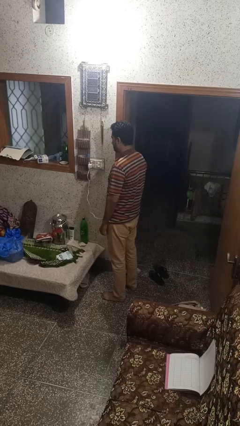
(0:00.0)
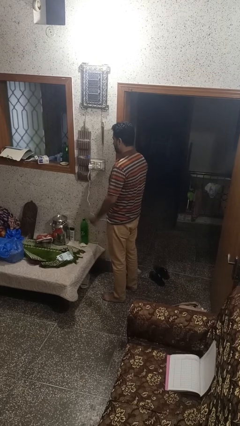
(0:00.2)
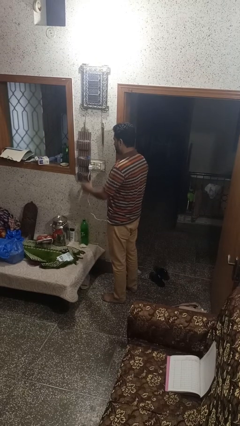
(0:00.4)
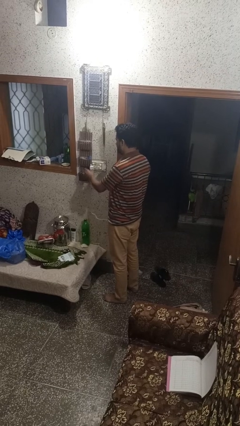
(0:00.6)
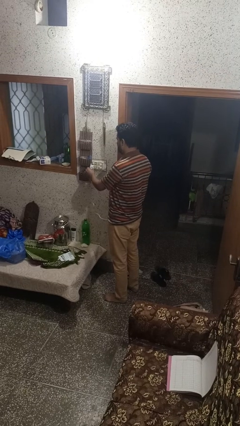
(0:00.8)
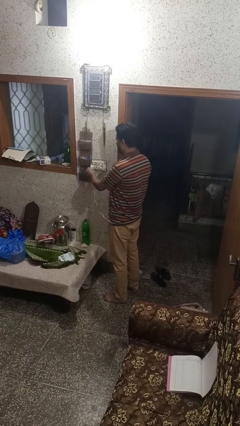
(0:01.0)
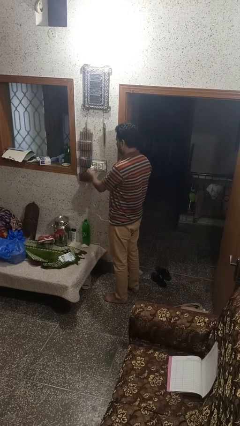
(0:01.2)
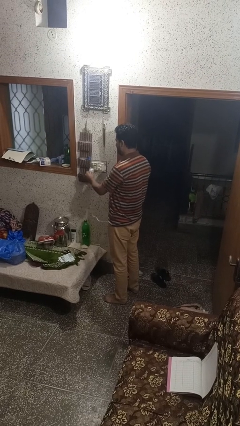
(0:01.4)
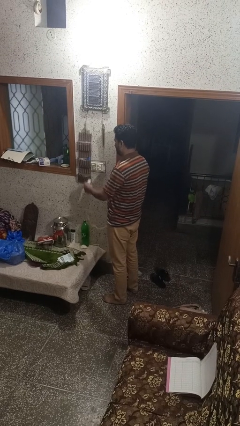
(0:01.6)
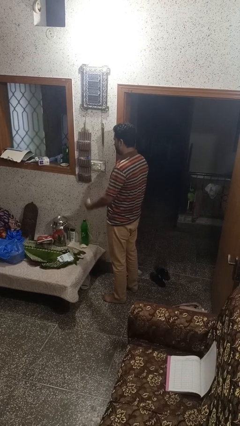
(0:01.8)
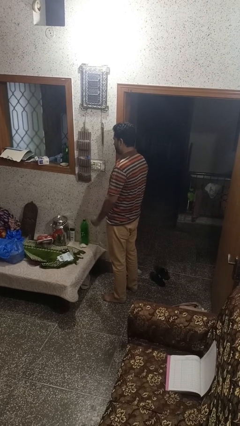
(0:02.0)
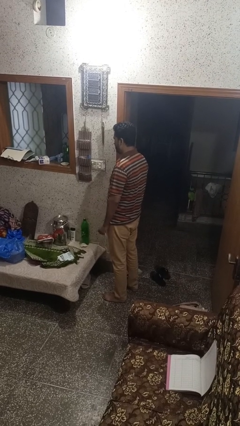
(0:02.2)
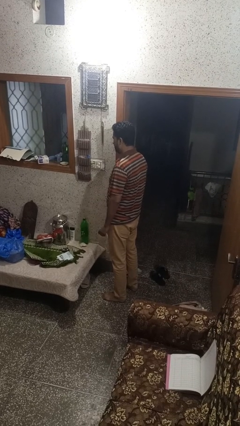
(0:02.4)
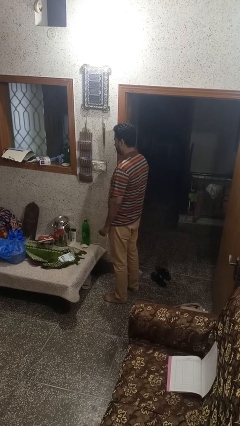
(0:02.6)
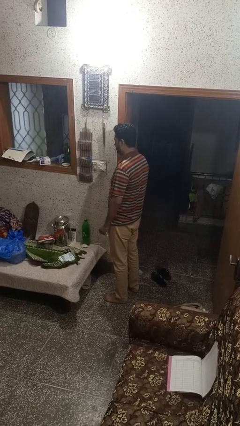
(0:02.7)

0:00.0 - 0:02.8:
person unplugs from electrical socket

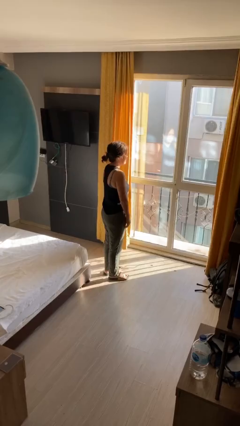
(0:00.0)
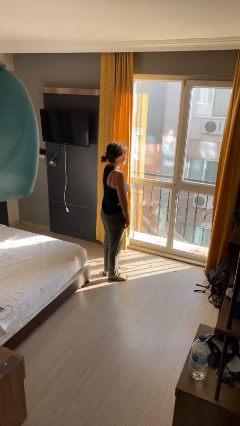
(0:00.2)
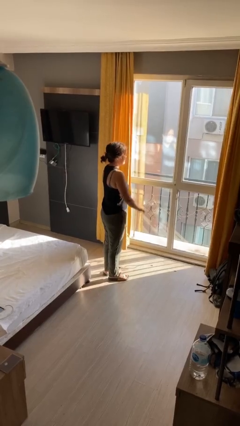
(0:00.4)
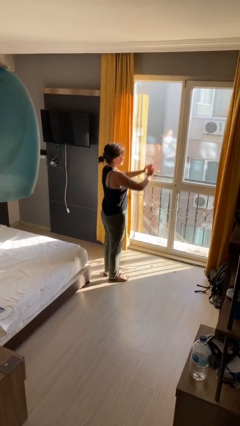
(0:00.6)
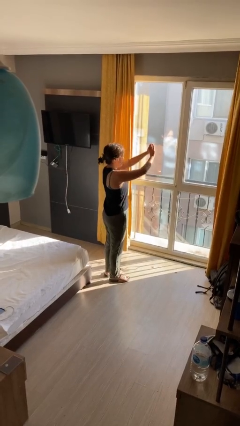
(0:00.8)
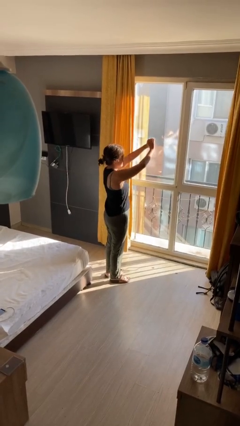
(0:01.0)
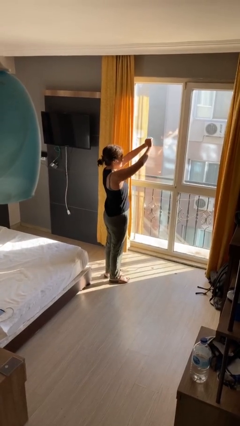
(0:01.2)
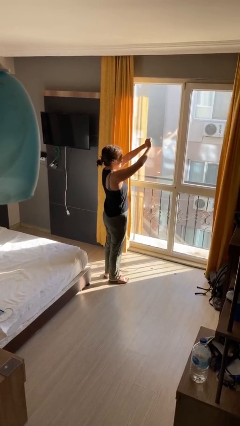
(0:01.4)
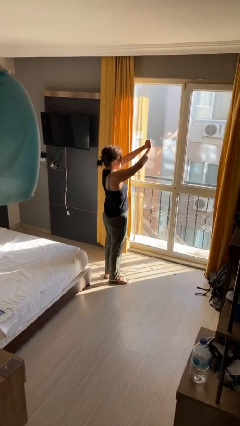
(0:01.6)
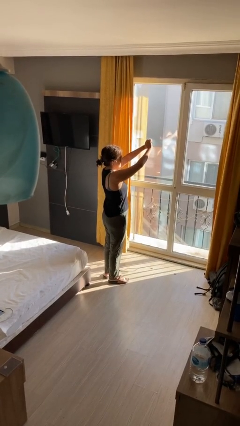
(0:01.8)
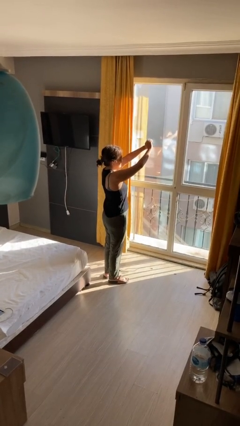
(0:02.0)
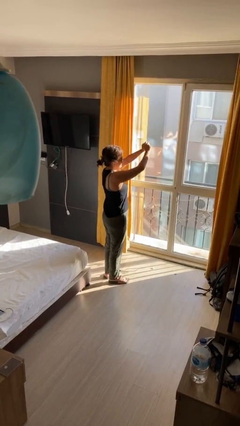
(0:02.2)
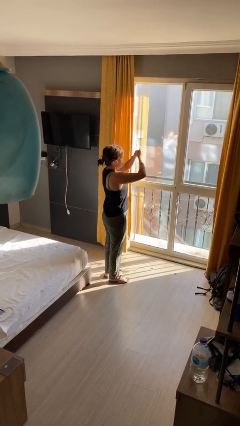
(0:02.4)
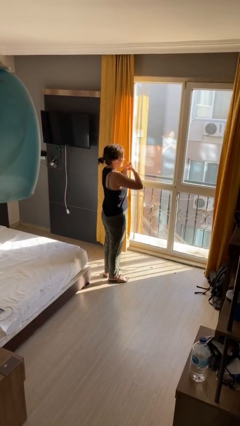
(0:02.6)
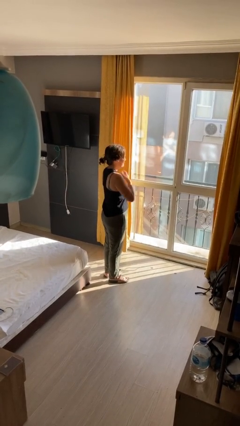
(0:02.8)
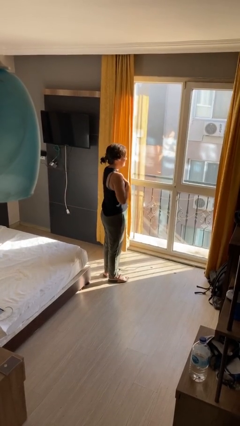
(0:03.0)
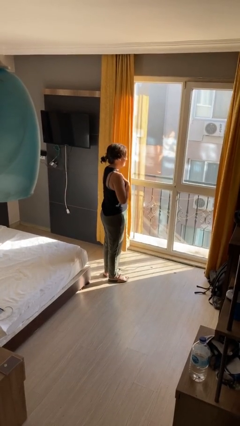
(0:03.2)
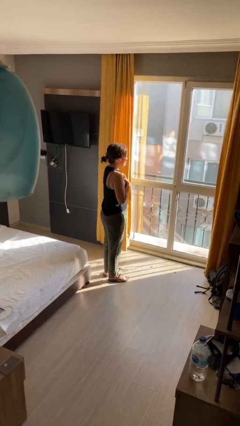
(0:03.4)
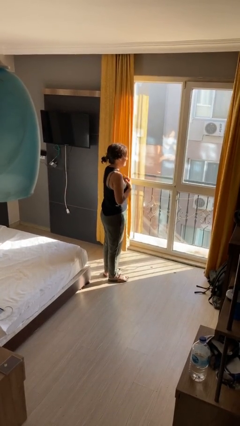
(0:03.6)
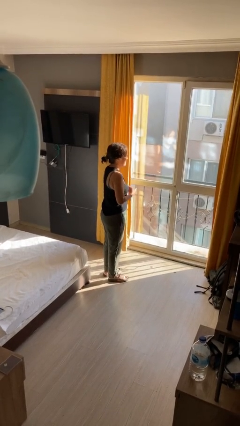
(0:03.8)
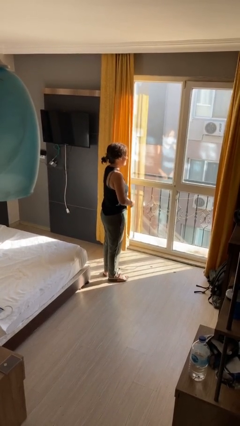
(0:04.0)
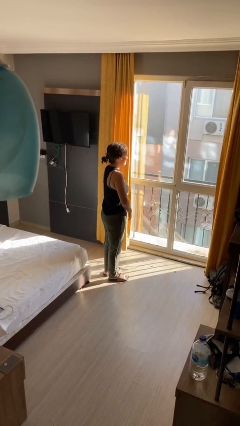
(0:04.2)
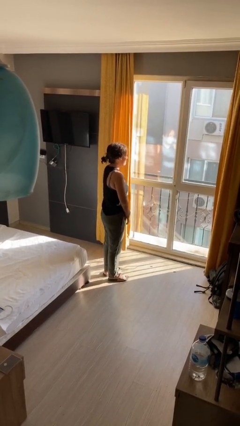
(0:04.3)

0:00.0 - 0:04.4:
person prays

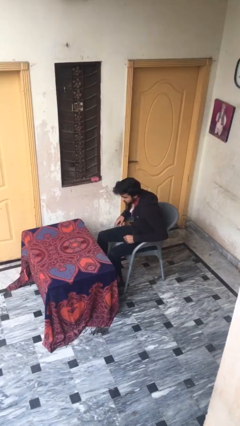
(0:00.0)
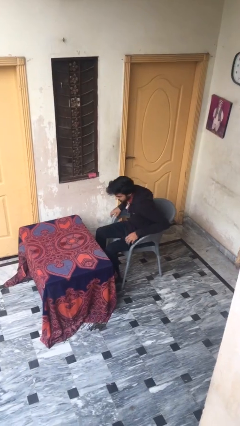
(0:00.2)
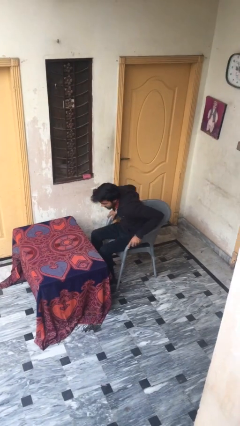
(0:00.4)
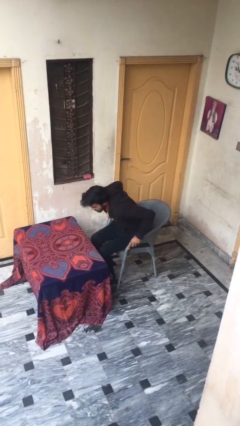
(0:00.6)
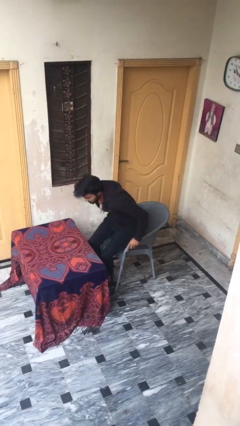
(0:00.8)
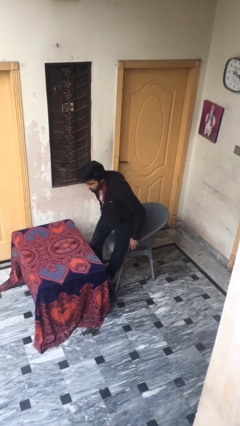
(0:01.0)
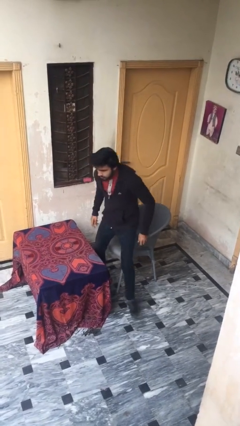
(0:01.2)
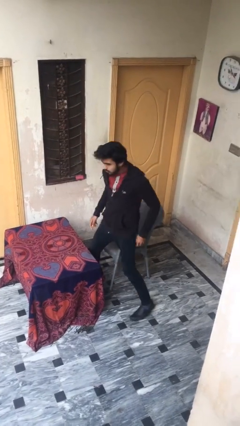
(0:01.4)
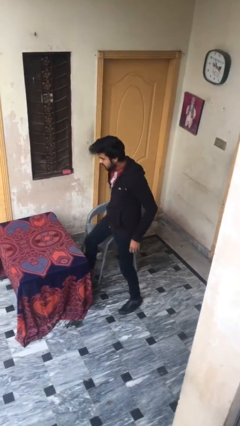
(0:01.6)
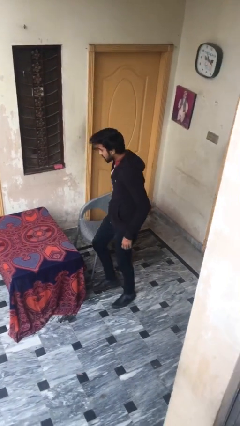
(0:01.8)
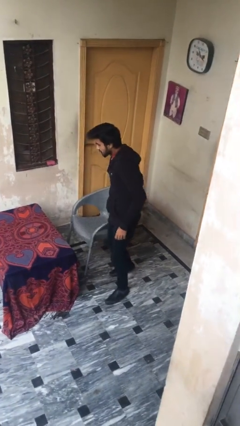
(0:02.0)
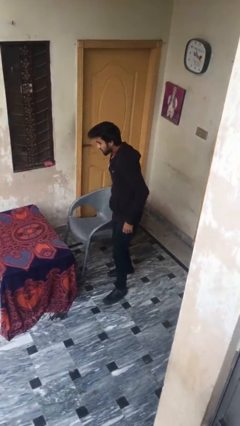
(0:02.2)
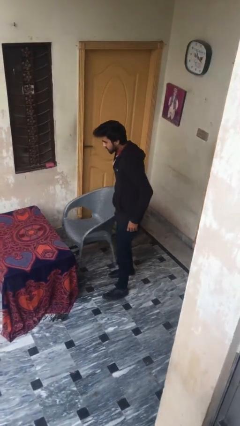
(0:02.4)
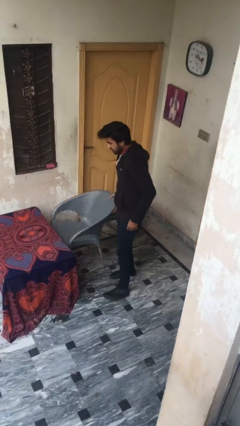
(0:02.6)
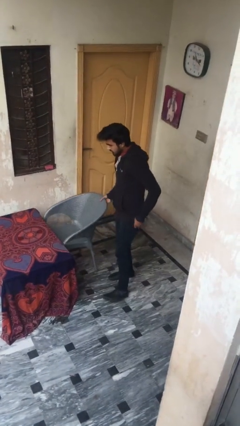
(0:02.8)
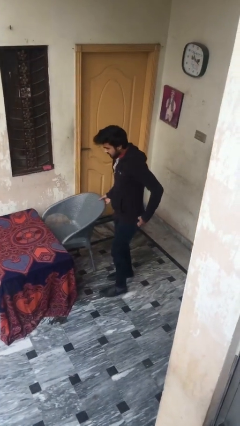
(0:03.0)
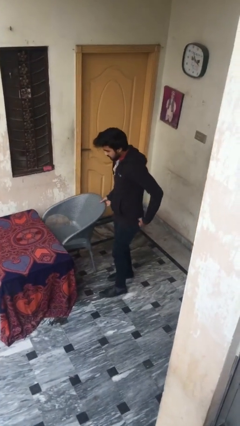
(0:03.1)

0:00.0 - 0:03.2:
person stands up

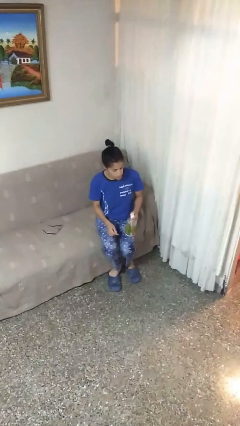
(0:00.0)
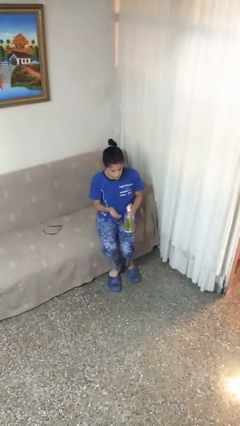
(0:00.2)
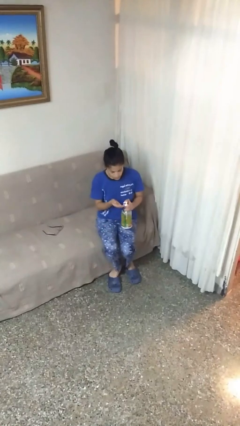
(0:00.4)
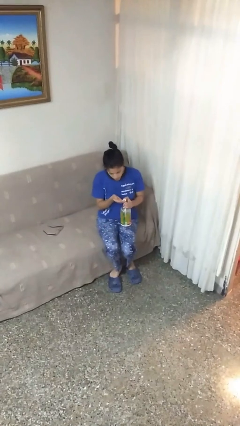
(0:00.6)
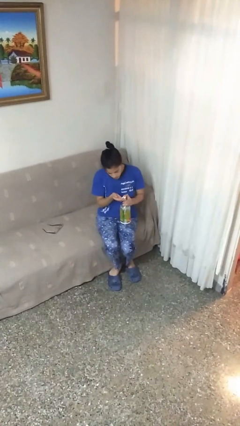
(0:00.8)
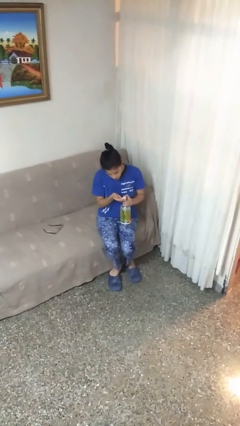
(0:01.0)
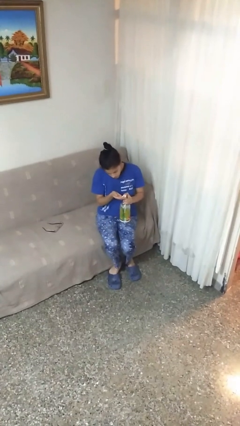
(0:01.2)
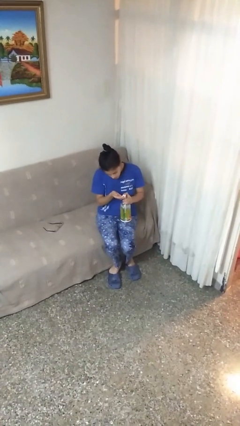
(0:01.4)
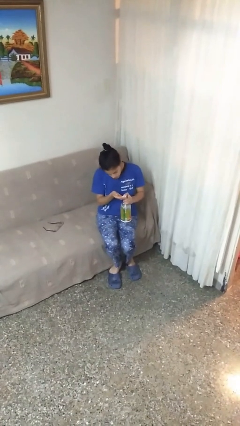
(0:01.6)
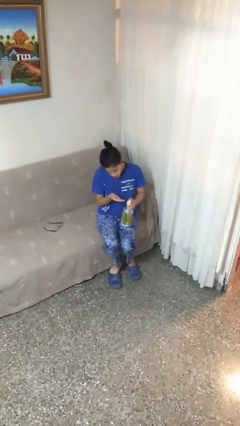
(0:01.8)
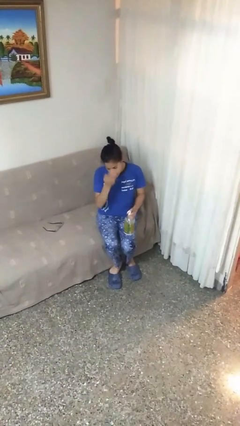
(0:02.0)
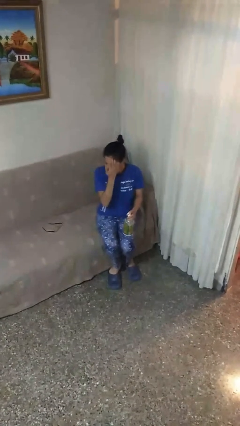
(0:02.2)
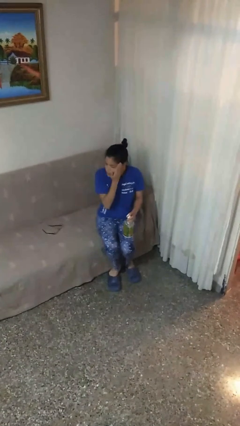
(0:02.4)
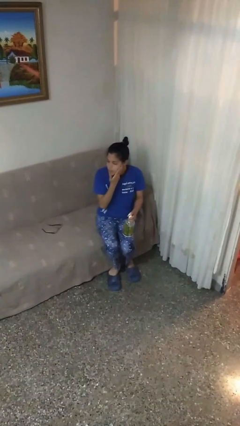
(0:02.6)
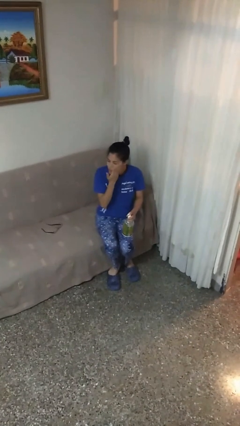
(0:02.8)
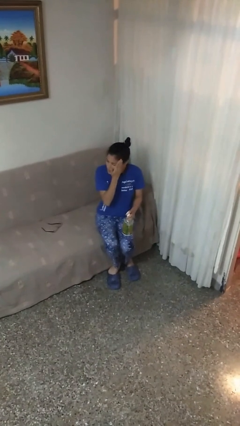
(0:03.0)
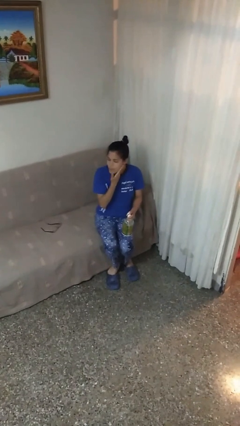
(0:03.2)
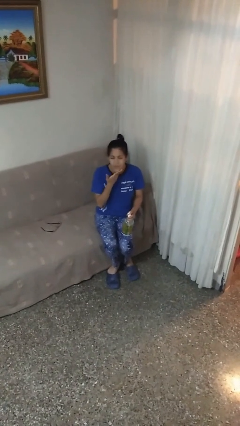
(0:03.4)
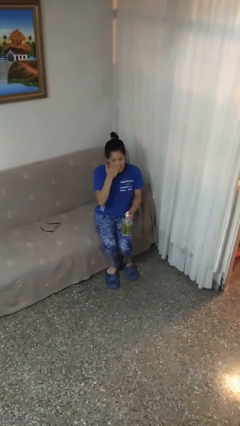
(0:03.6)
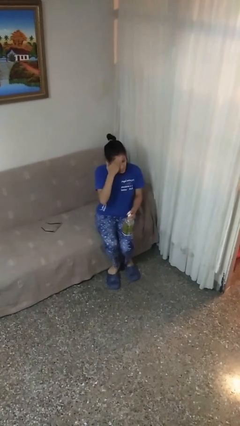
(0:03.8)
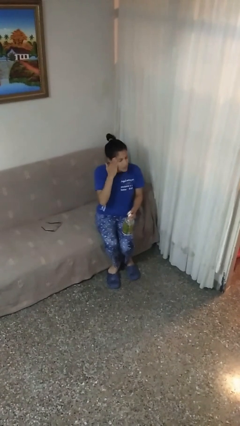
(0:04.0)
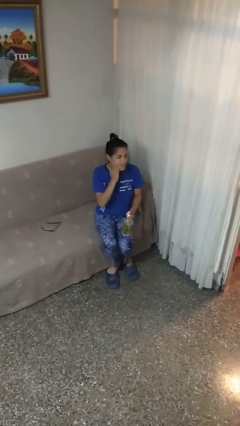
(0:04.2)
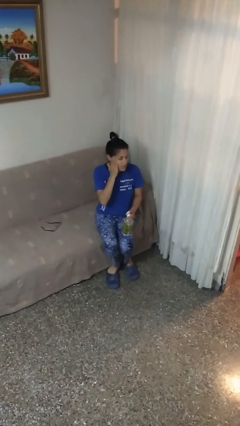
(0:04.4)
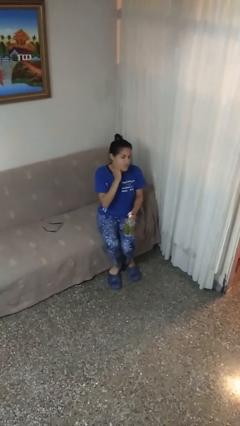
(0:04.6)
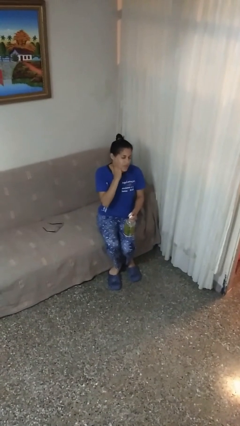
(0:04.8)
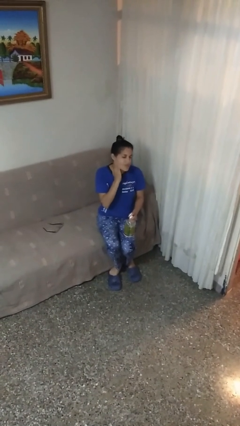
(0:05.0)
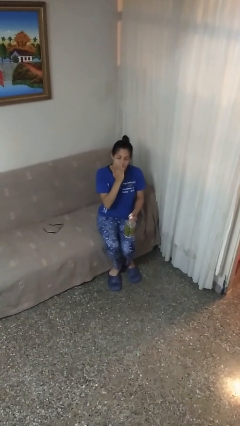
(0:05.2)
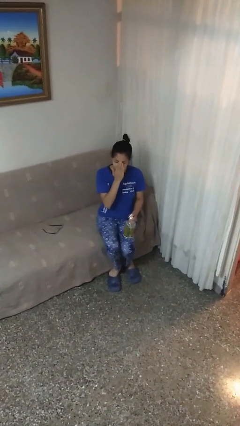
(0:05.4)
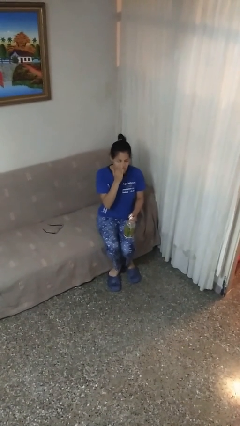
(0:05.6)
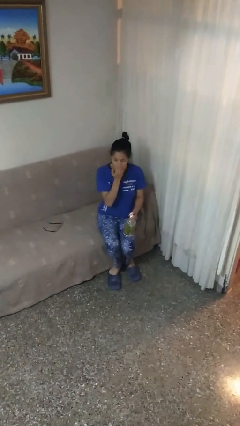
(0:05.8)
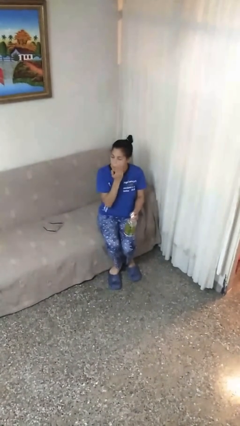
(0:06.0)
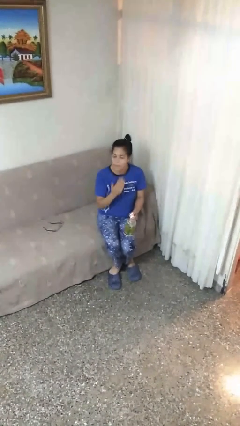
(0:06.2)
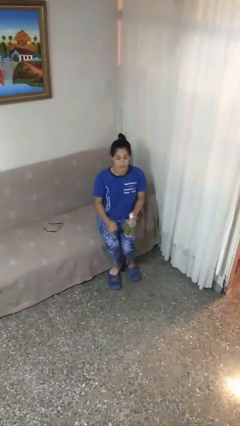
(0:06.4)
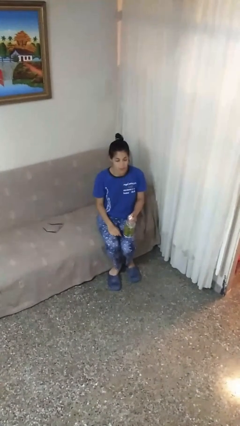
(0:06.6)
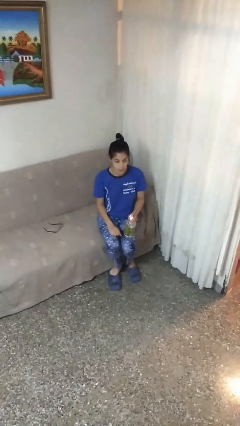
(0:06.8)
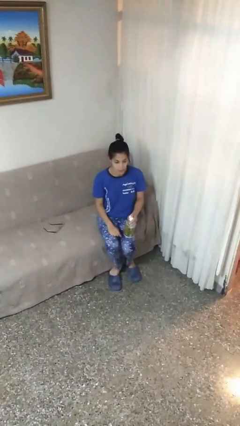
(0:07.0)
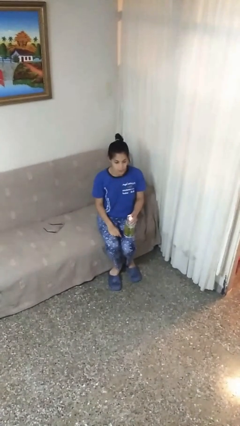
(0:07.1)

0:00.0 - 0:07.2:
person applies facial moisturizer
